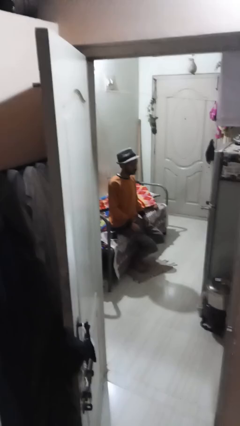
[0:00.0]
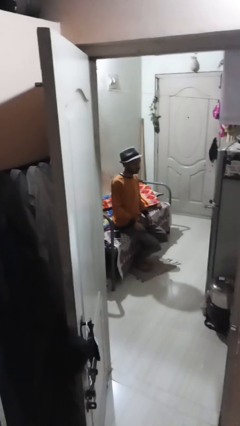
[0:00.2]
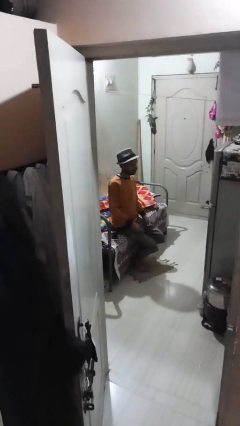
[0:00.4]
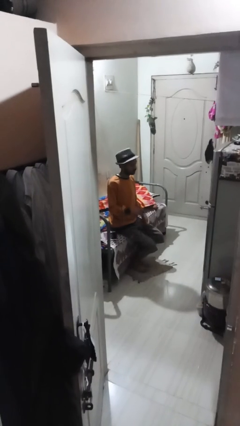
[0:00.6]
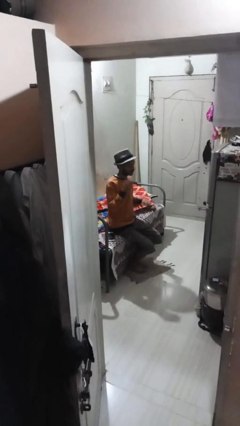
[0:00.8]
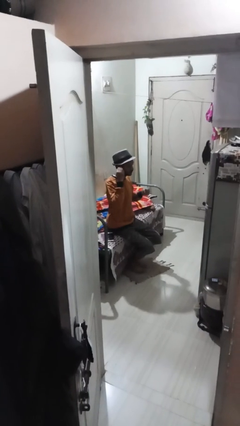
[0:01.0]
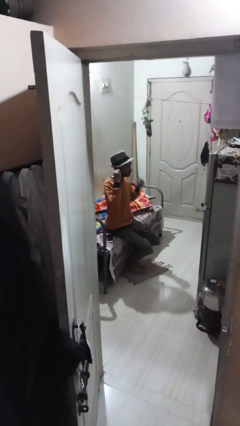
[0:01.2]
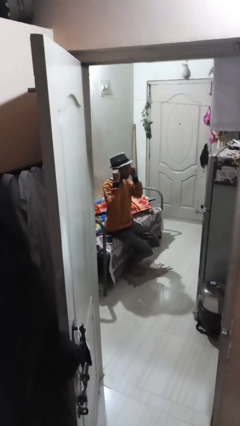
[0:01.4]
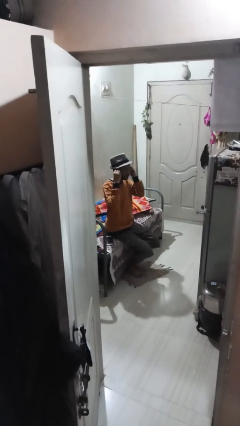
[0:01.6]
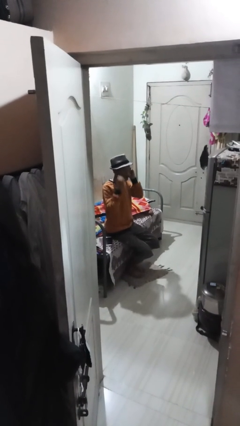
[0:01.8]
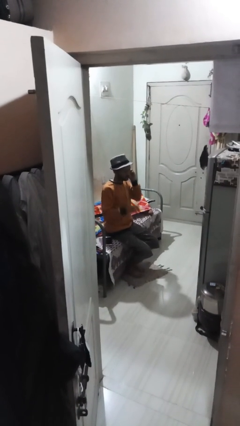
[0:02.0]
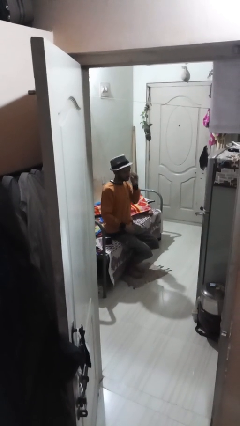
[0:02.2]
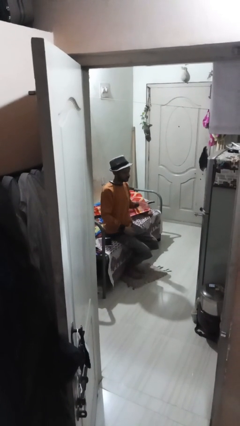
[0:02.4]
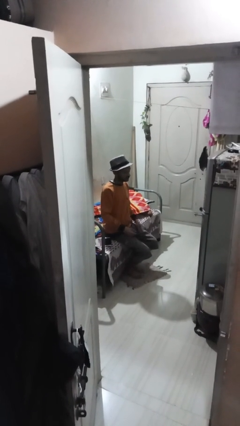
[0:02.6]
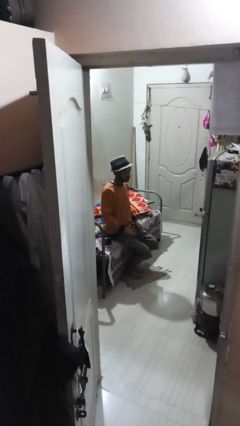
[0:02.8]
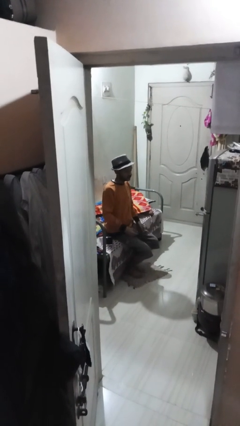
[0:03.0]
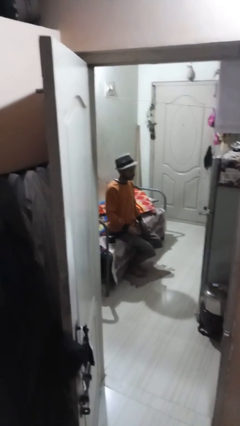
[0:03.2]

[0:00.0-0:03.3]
person puts on headphones

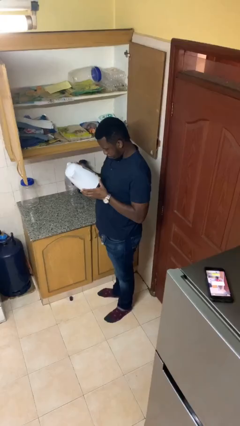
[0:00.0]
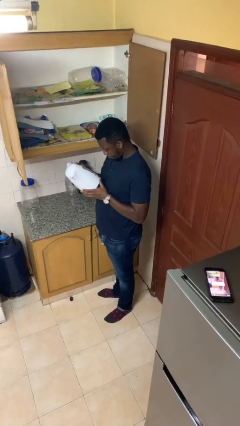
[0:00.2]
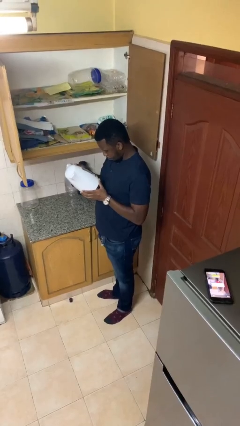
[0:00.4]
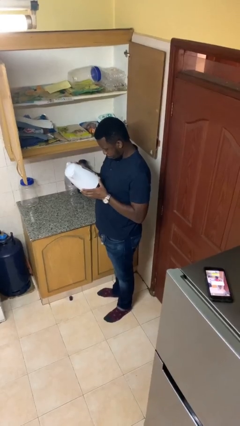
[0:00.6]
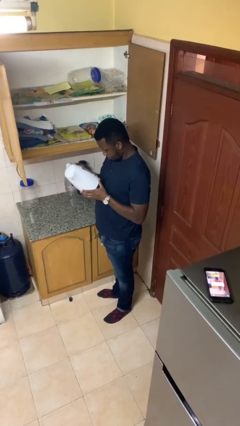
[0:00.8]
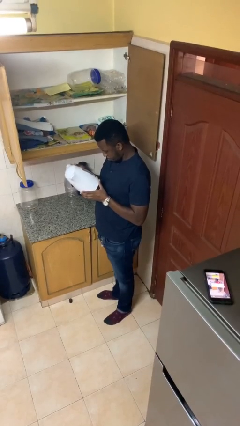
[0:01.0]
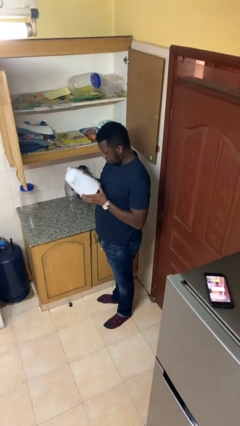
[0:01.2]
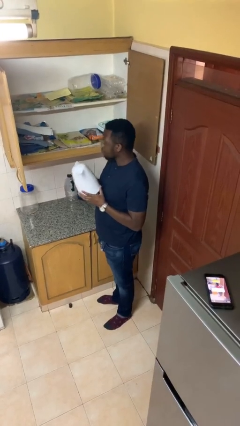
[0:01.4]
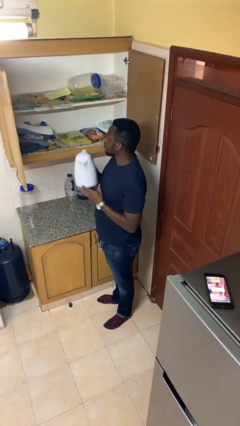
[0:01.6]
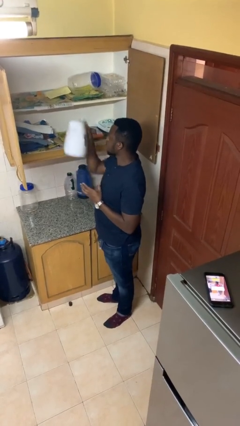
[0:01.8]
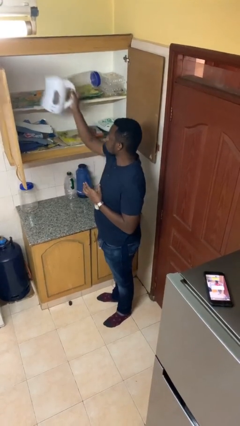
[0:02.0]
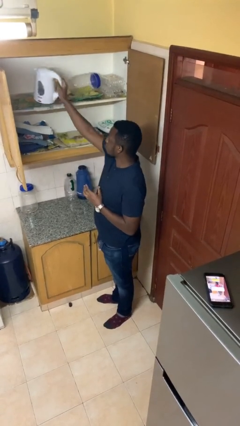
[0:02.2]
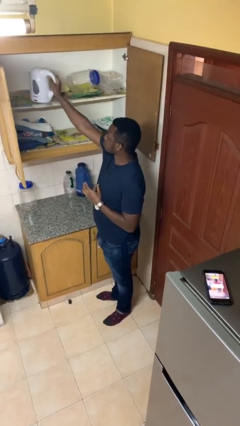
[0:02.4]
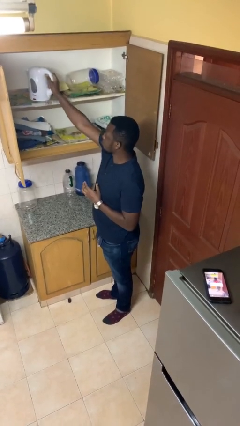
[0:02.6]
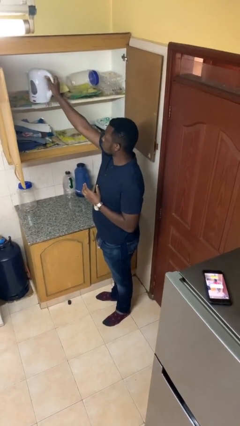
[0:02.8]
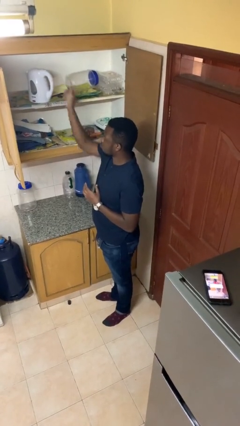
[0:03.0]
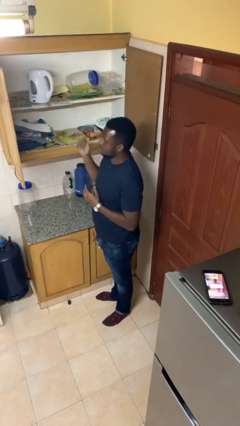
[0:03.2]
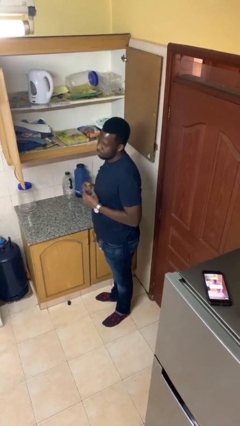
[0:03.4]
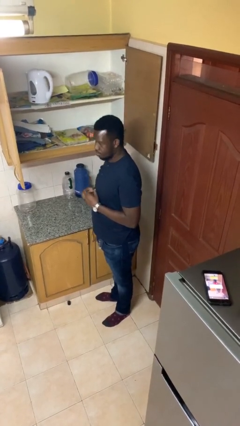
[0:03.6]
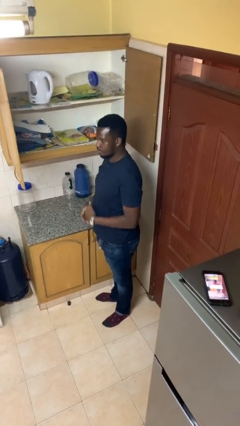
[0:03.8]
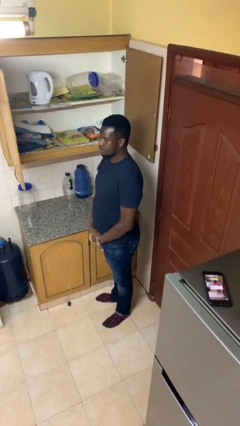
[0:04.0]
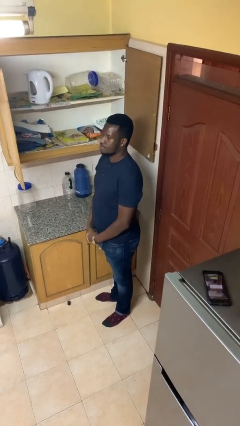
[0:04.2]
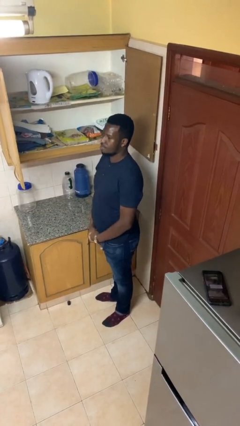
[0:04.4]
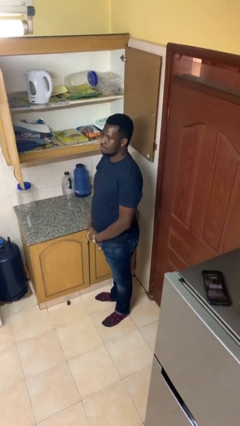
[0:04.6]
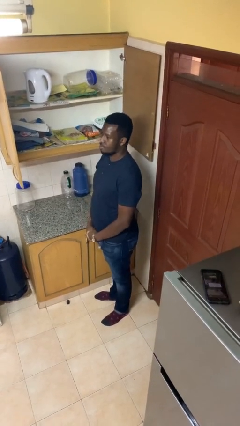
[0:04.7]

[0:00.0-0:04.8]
person puts down object on shelf

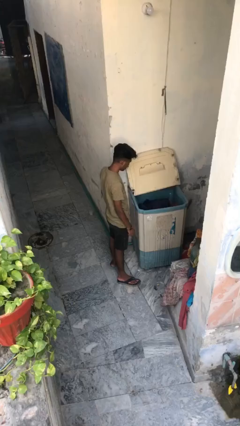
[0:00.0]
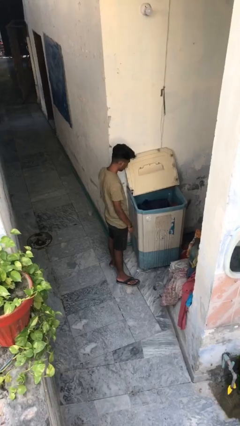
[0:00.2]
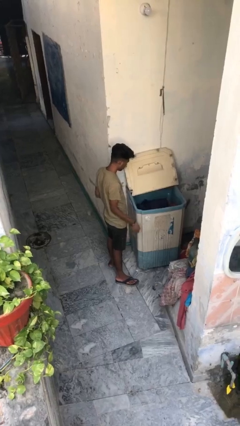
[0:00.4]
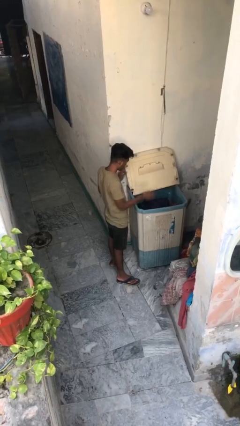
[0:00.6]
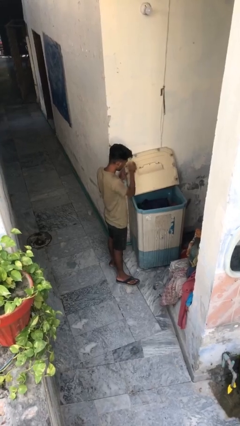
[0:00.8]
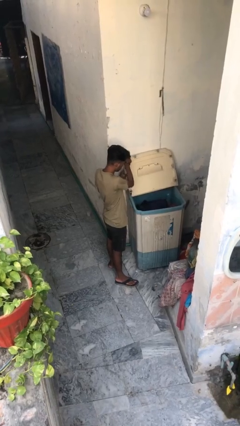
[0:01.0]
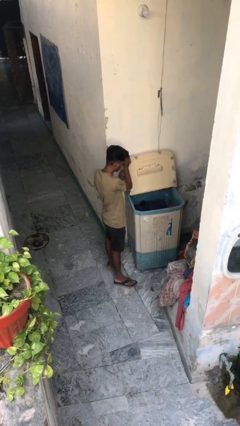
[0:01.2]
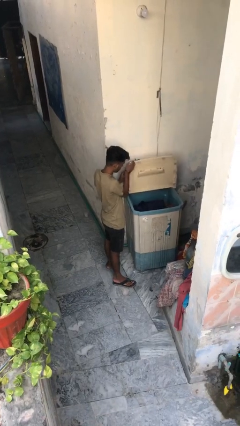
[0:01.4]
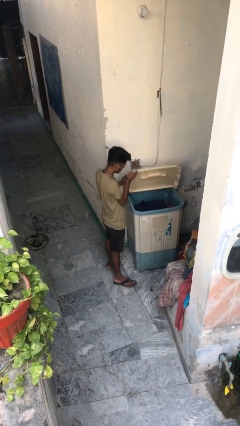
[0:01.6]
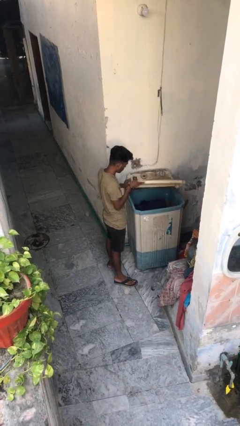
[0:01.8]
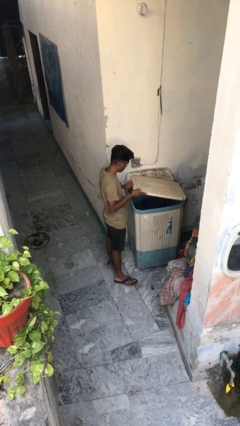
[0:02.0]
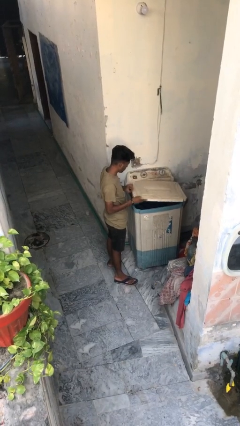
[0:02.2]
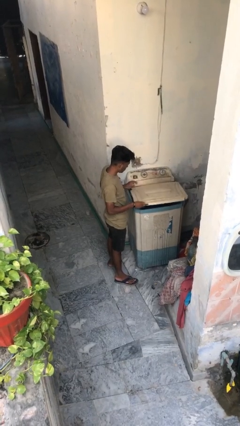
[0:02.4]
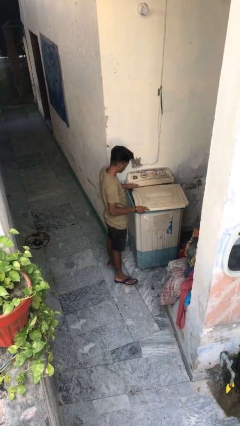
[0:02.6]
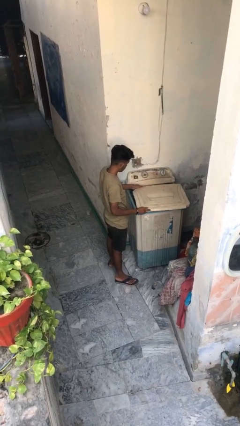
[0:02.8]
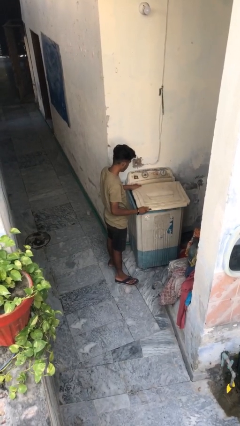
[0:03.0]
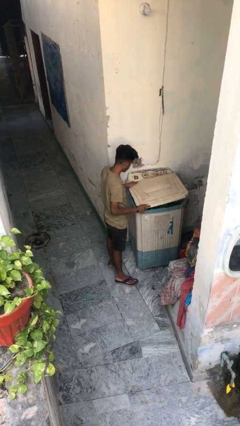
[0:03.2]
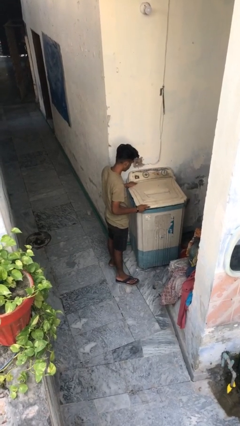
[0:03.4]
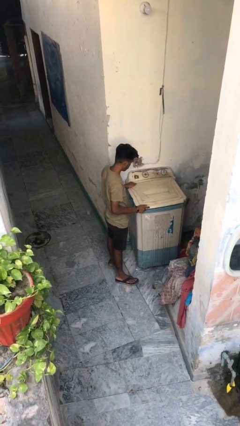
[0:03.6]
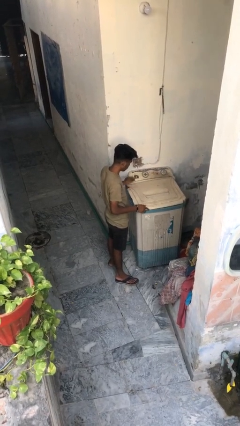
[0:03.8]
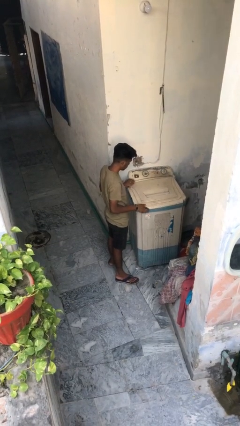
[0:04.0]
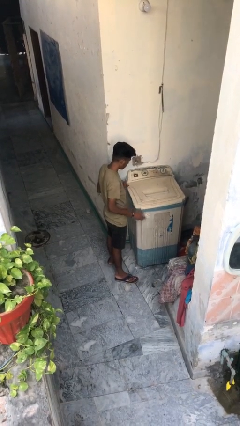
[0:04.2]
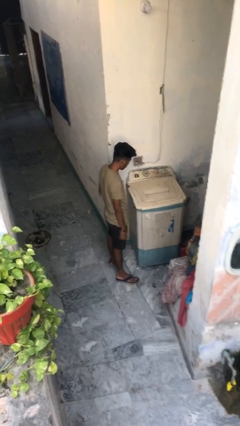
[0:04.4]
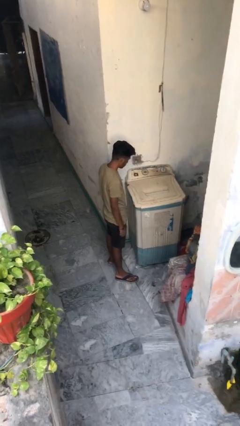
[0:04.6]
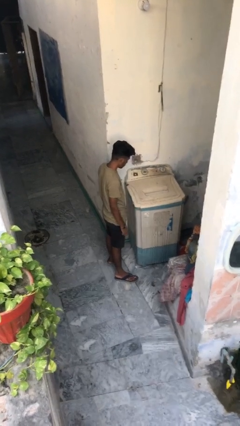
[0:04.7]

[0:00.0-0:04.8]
person closes clothes washer

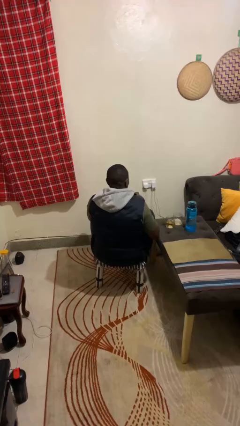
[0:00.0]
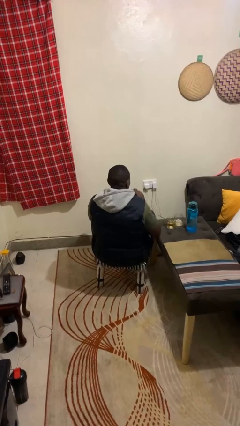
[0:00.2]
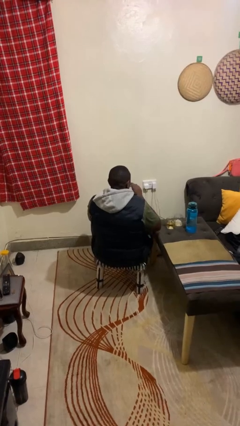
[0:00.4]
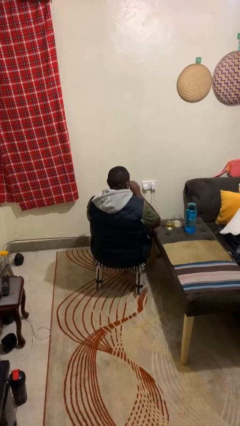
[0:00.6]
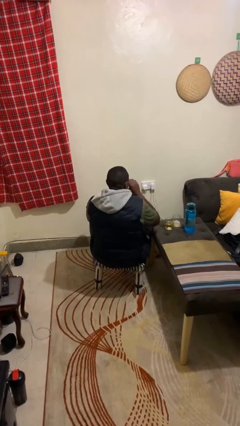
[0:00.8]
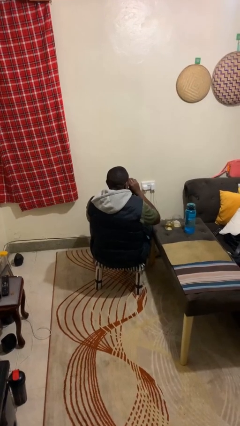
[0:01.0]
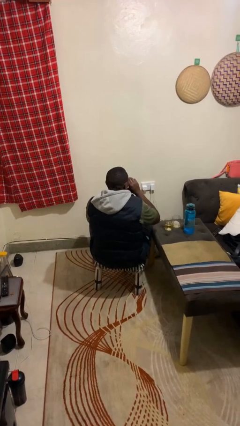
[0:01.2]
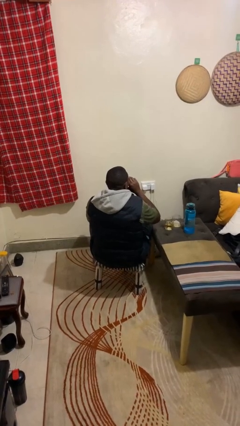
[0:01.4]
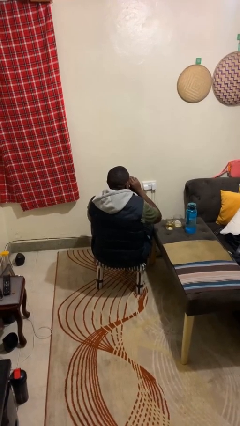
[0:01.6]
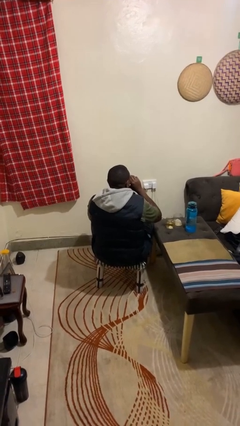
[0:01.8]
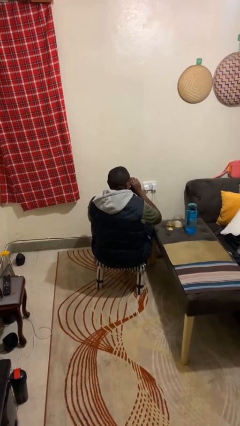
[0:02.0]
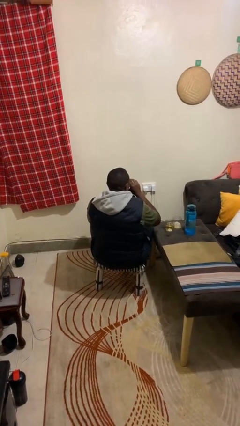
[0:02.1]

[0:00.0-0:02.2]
person drinks from shotglass

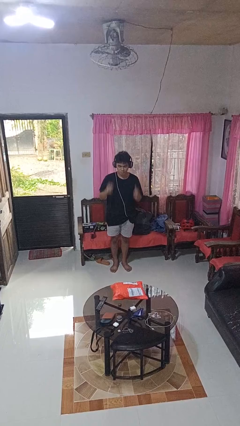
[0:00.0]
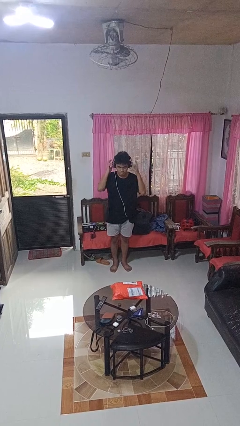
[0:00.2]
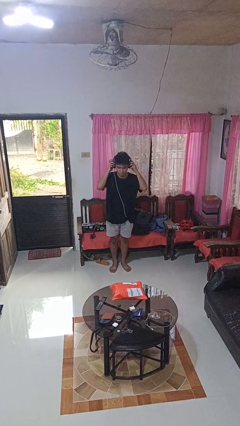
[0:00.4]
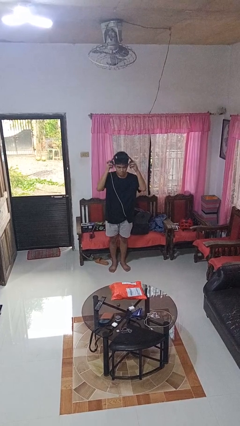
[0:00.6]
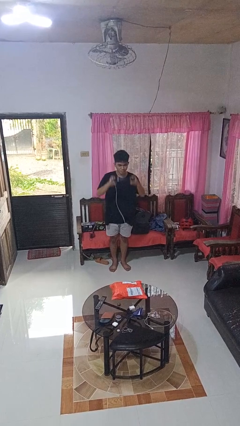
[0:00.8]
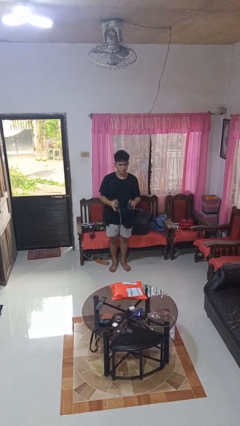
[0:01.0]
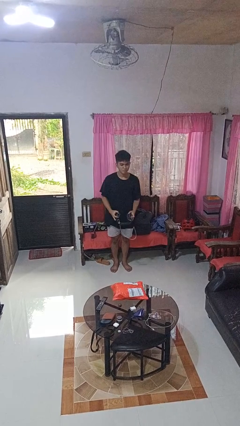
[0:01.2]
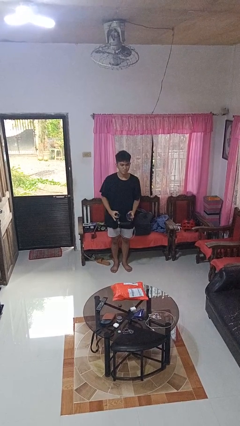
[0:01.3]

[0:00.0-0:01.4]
person takes off headphones

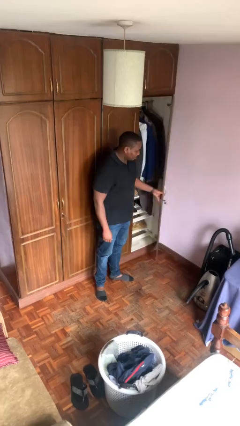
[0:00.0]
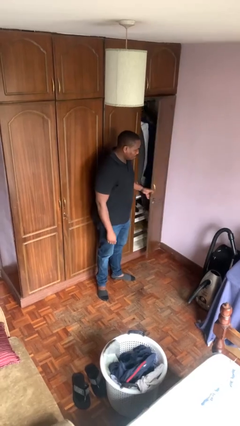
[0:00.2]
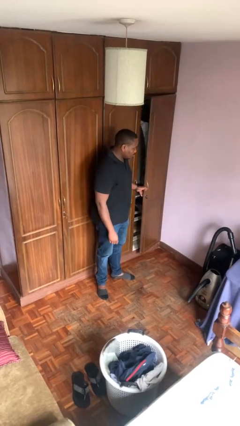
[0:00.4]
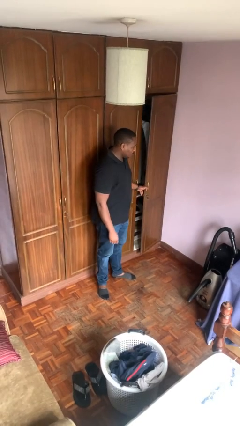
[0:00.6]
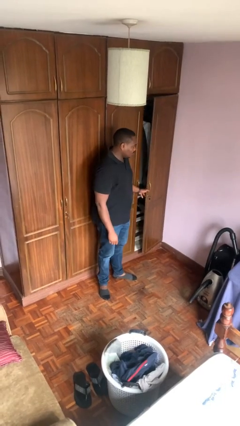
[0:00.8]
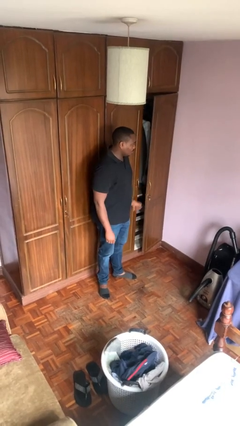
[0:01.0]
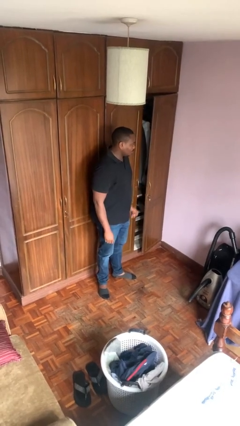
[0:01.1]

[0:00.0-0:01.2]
person closes closet door
